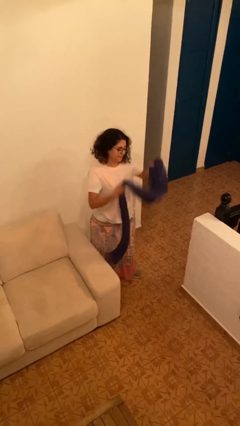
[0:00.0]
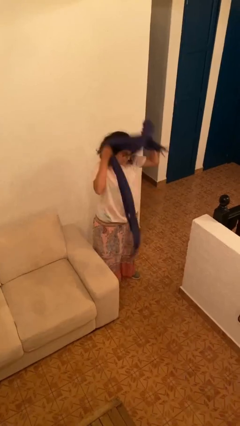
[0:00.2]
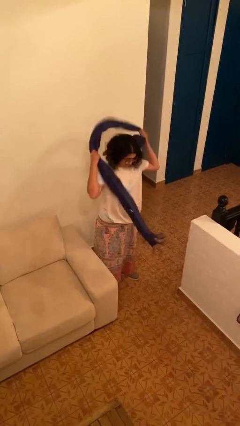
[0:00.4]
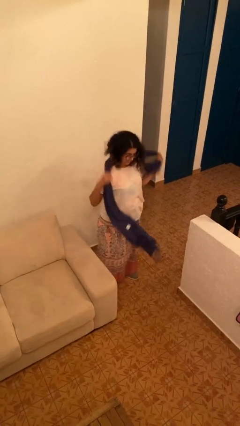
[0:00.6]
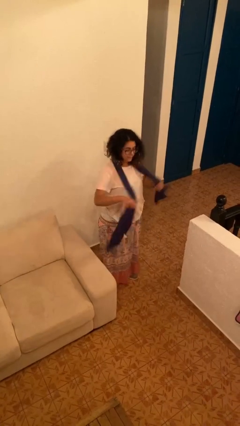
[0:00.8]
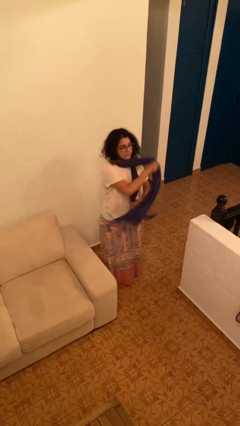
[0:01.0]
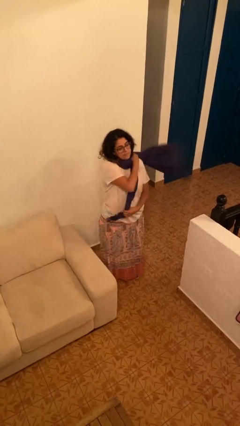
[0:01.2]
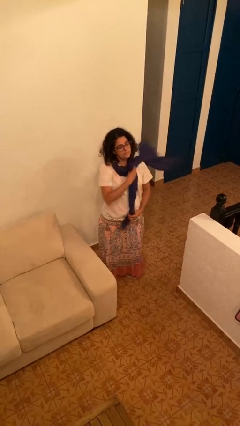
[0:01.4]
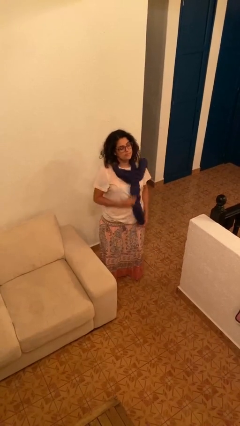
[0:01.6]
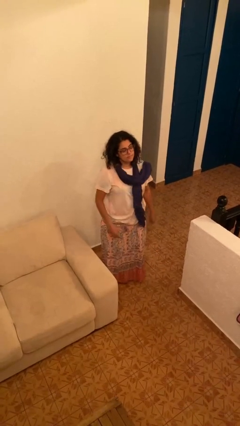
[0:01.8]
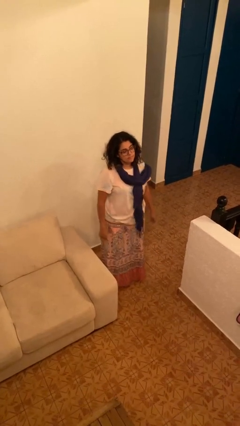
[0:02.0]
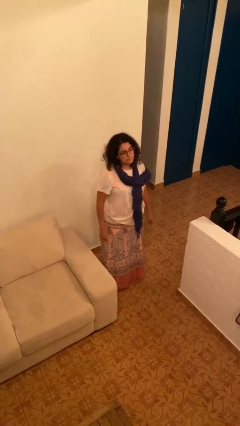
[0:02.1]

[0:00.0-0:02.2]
person puts on scarf

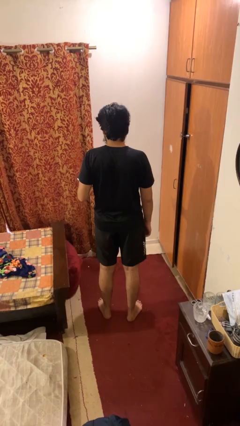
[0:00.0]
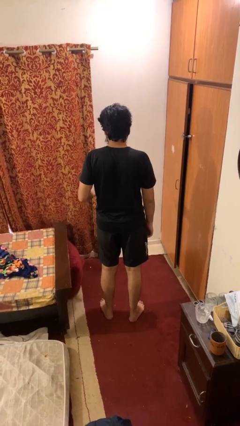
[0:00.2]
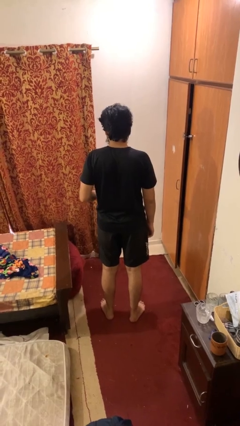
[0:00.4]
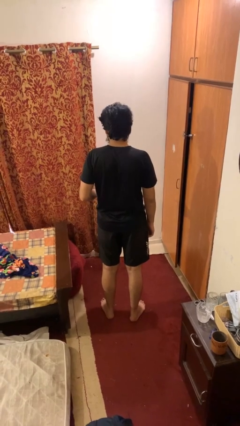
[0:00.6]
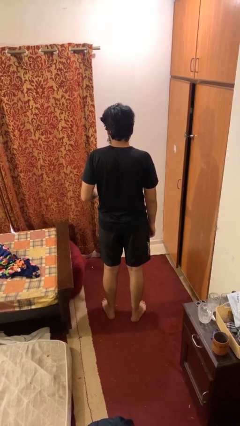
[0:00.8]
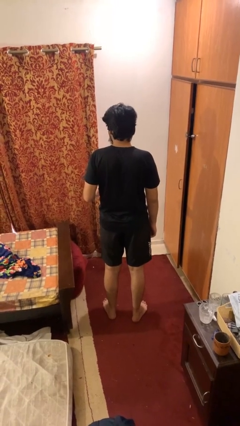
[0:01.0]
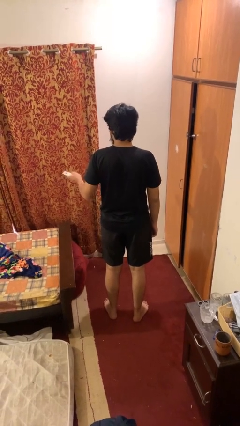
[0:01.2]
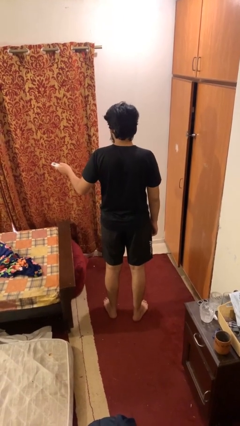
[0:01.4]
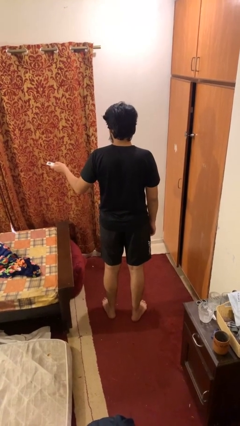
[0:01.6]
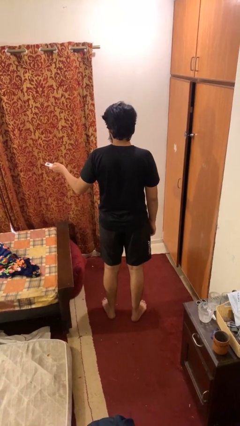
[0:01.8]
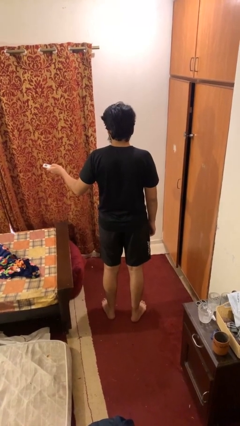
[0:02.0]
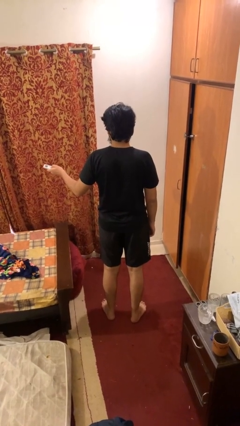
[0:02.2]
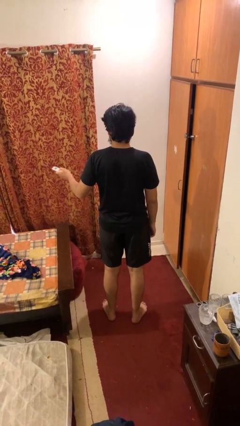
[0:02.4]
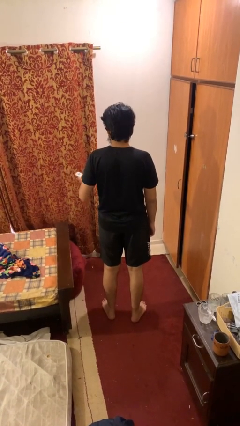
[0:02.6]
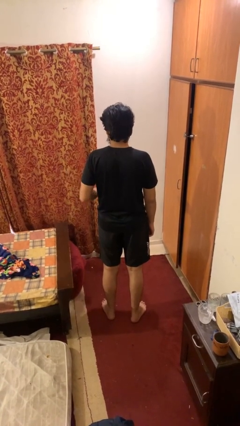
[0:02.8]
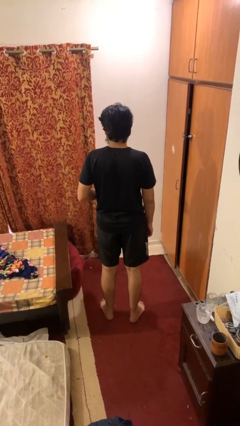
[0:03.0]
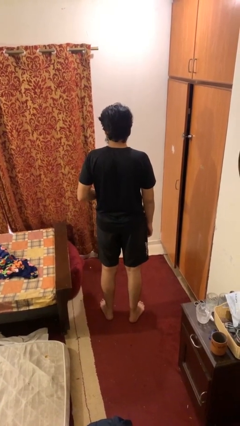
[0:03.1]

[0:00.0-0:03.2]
person uses television remote

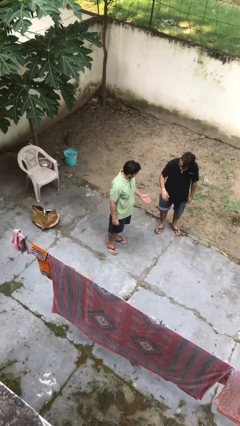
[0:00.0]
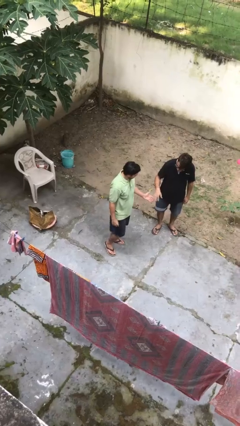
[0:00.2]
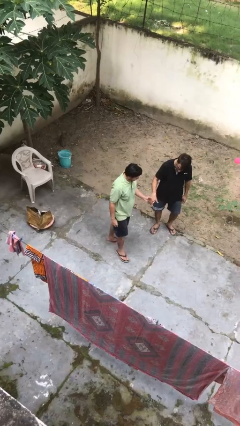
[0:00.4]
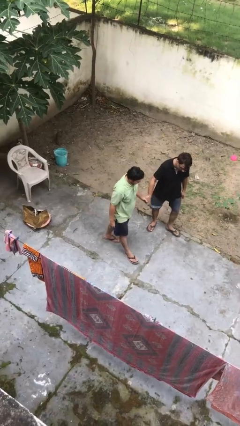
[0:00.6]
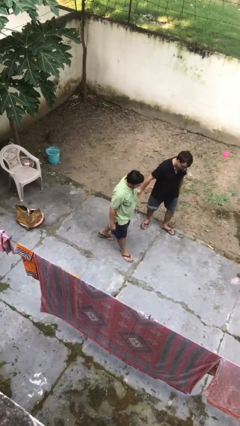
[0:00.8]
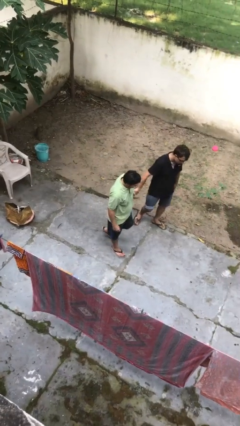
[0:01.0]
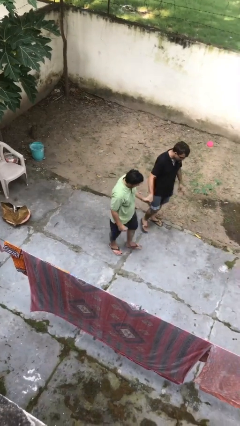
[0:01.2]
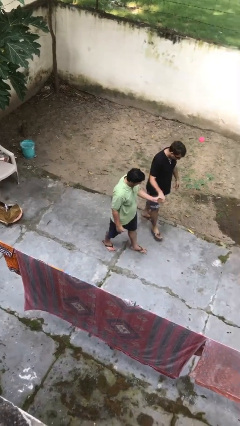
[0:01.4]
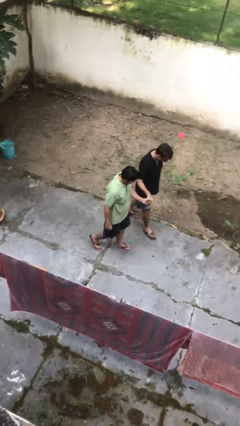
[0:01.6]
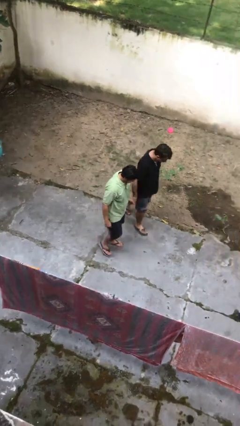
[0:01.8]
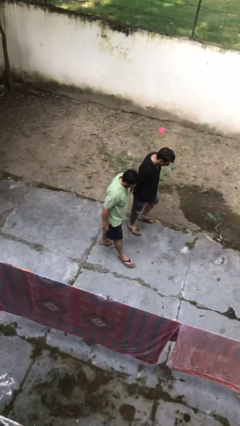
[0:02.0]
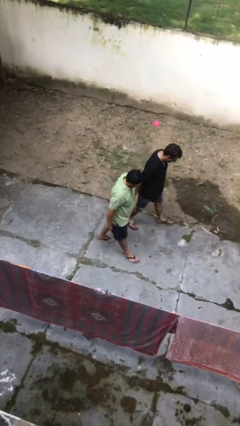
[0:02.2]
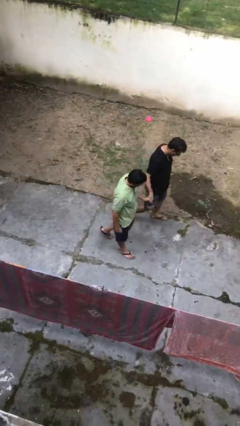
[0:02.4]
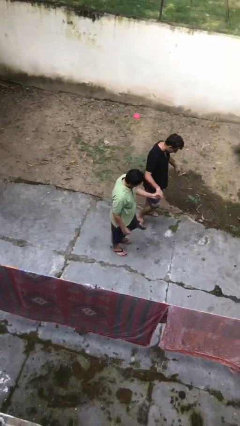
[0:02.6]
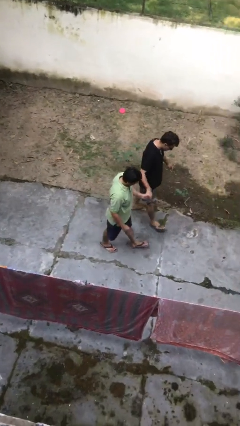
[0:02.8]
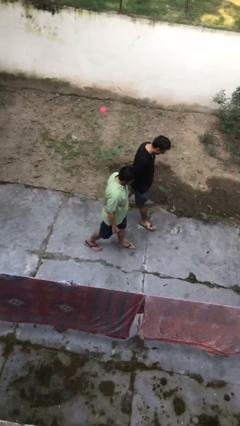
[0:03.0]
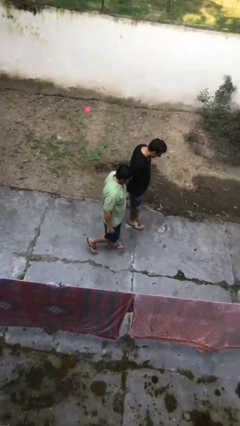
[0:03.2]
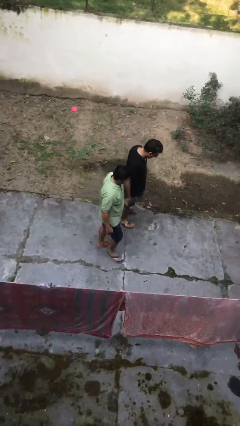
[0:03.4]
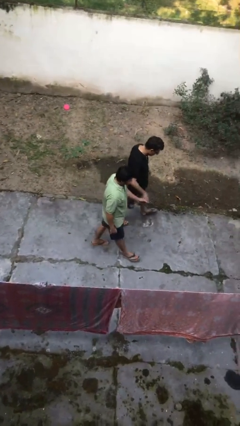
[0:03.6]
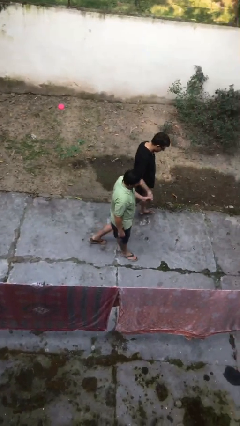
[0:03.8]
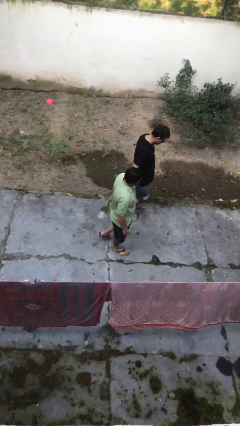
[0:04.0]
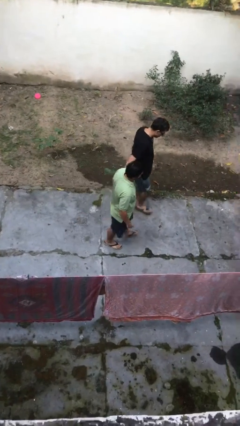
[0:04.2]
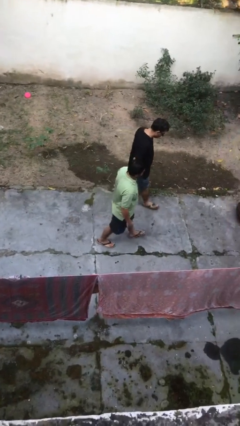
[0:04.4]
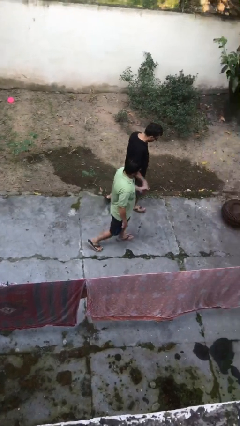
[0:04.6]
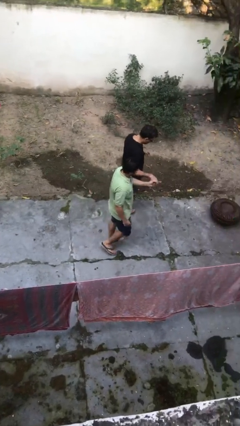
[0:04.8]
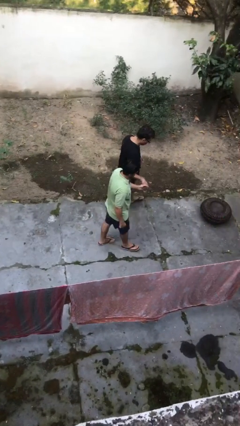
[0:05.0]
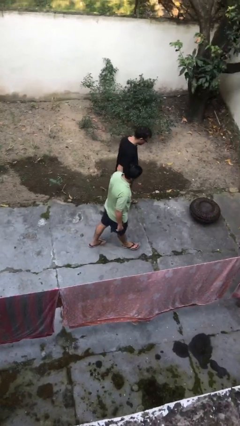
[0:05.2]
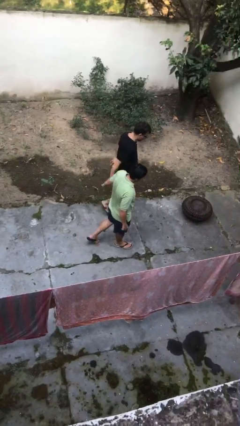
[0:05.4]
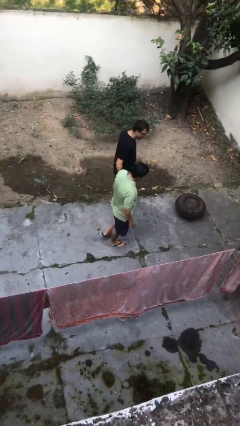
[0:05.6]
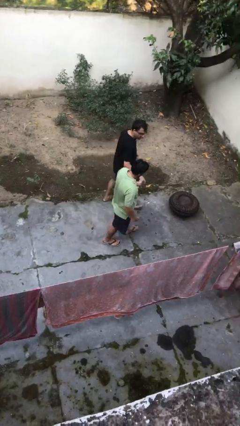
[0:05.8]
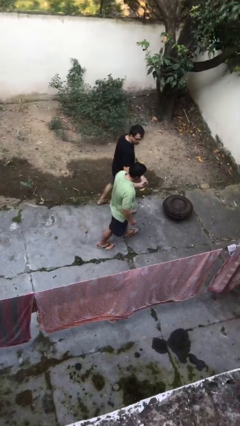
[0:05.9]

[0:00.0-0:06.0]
person holds hand

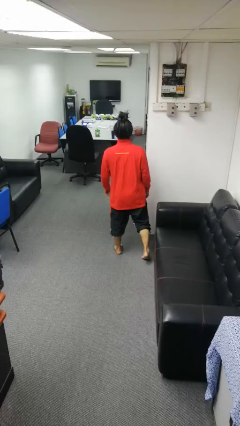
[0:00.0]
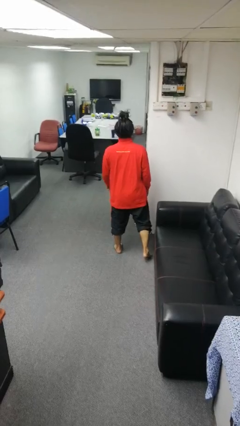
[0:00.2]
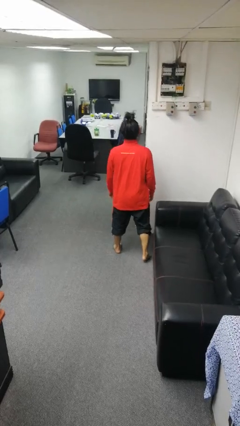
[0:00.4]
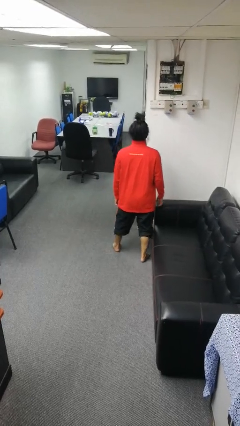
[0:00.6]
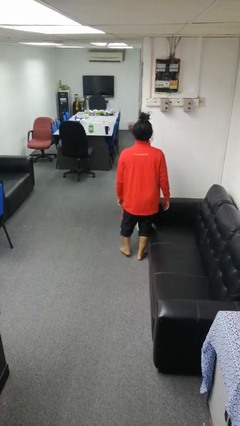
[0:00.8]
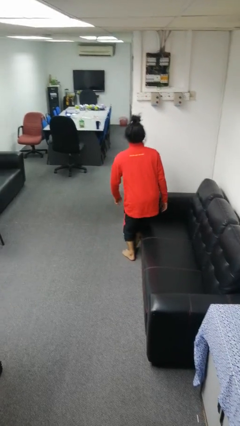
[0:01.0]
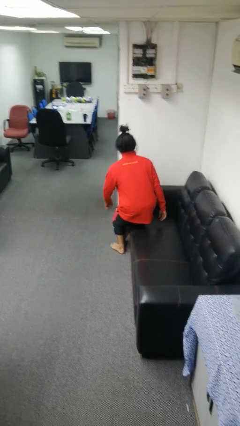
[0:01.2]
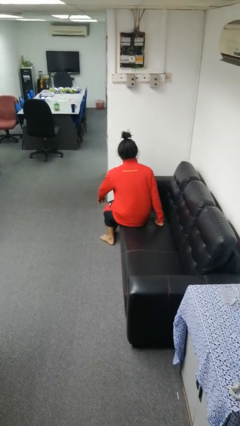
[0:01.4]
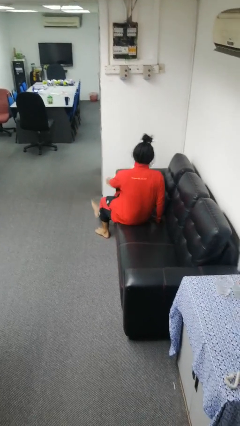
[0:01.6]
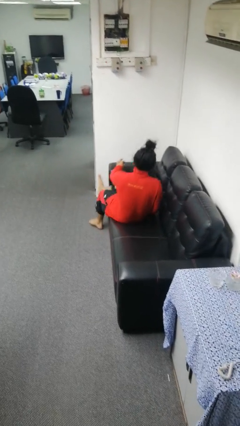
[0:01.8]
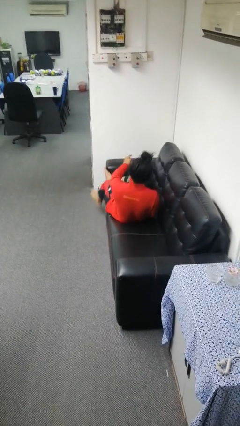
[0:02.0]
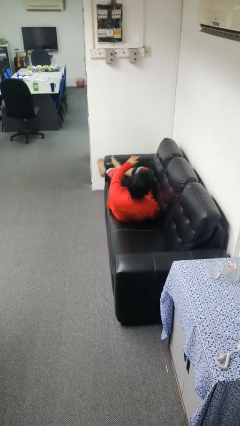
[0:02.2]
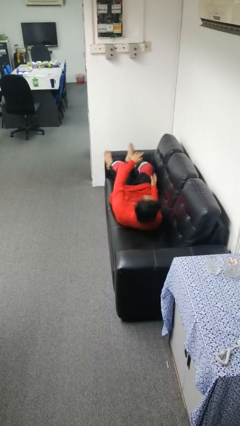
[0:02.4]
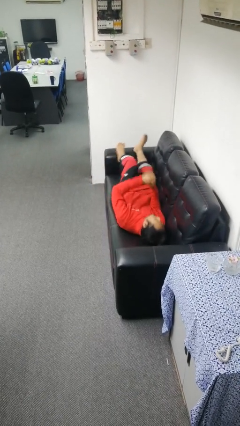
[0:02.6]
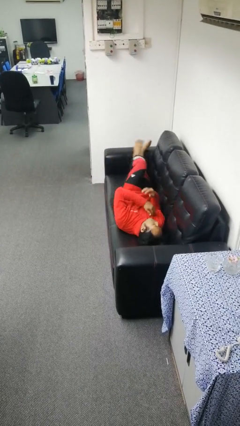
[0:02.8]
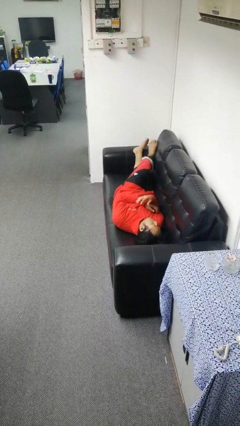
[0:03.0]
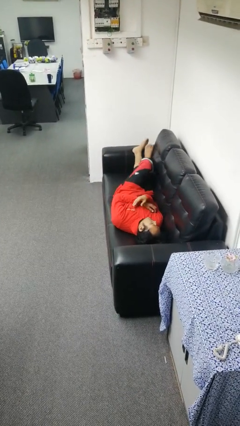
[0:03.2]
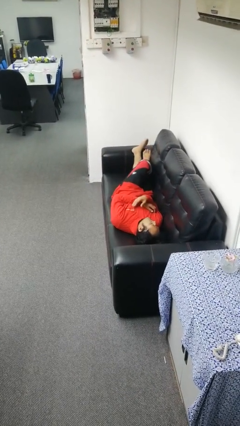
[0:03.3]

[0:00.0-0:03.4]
person lies down on couch

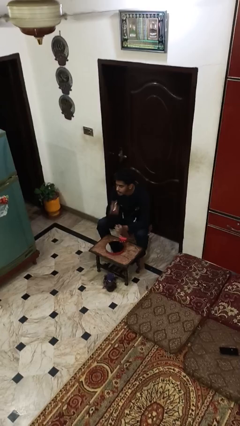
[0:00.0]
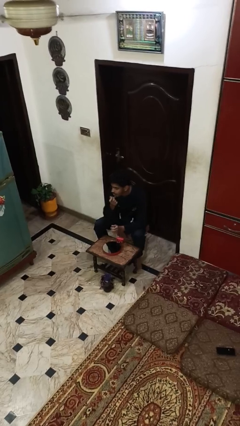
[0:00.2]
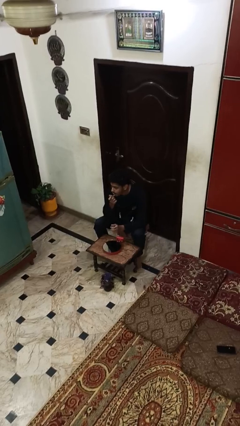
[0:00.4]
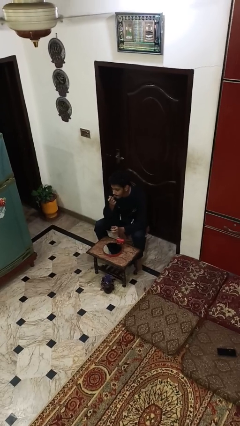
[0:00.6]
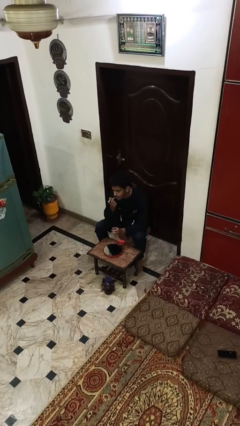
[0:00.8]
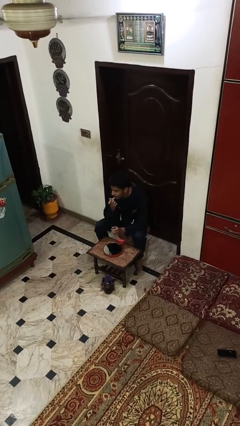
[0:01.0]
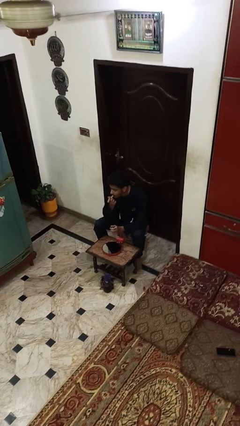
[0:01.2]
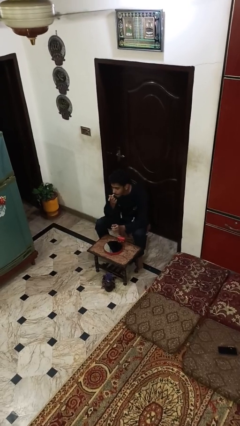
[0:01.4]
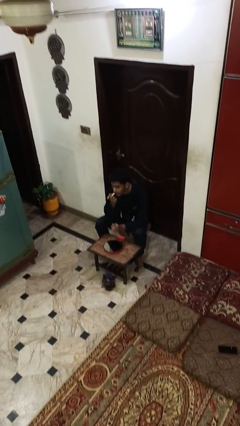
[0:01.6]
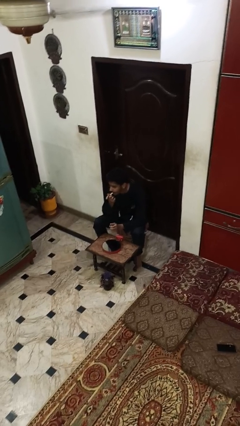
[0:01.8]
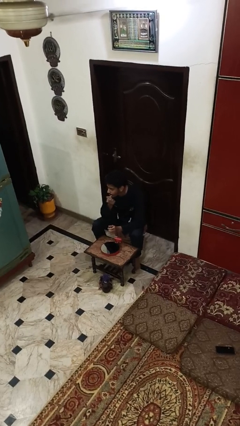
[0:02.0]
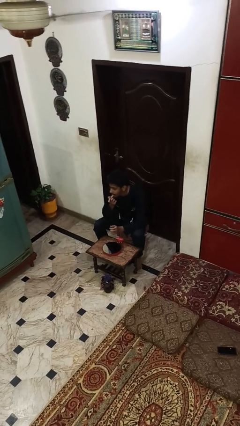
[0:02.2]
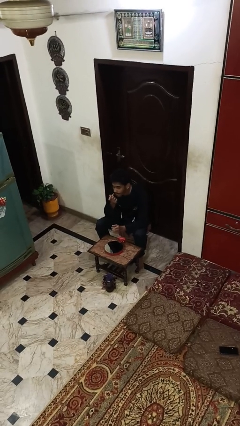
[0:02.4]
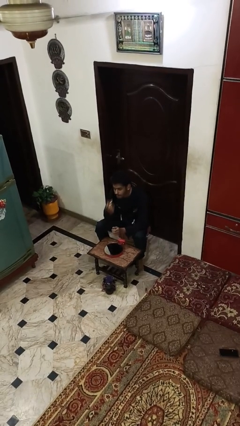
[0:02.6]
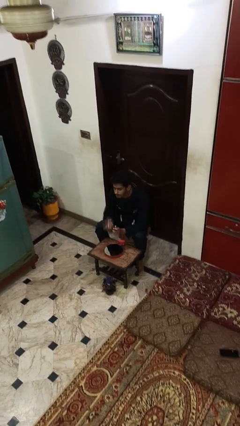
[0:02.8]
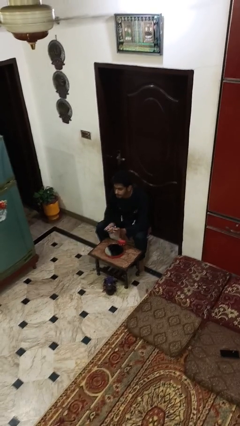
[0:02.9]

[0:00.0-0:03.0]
person applies lip makeup
